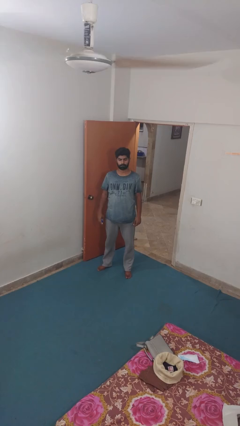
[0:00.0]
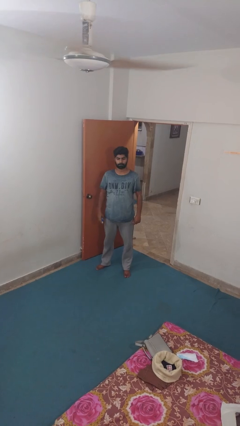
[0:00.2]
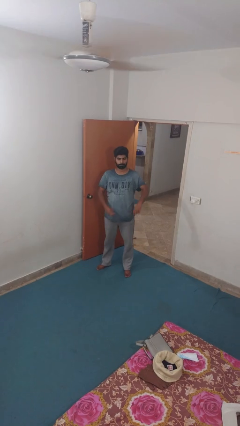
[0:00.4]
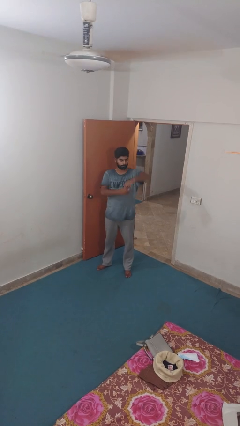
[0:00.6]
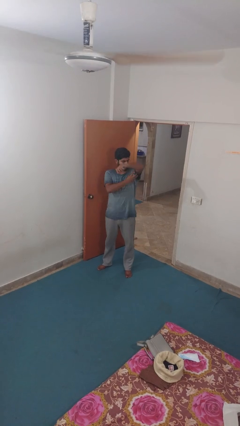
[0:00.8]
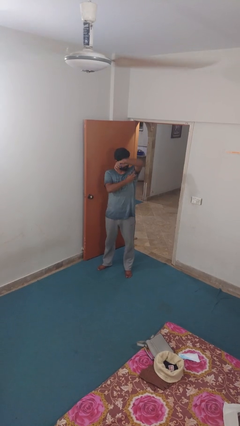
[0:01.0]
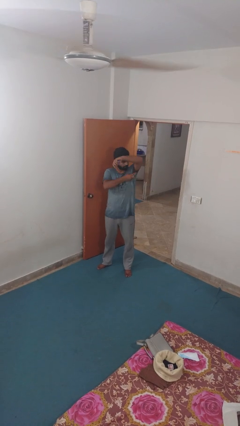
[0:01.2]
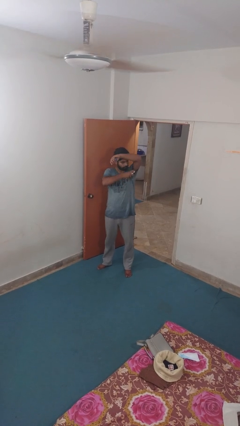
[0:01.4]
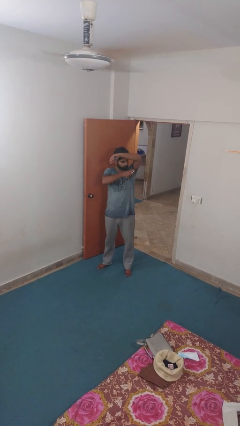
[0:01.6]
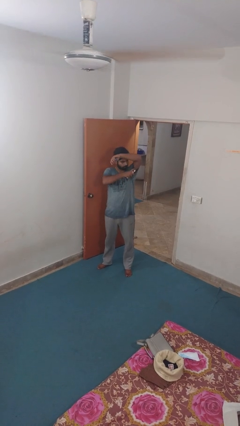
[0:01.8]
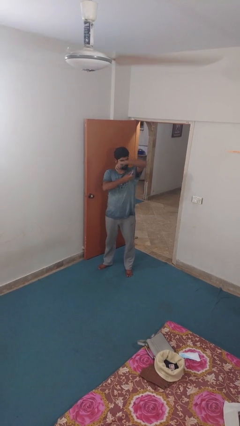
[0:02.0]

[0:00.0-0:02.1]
person applies deodorant

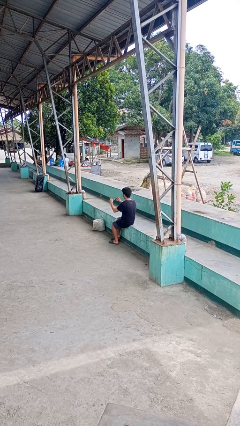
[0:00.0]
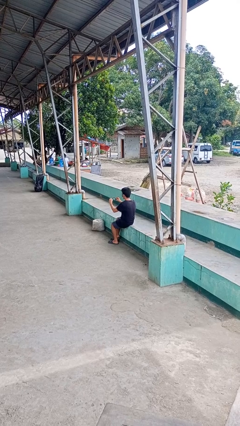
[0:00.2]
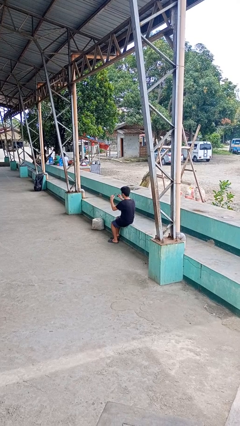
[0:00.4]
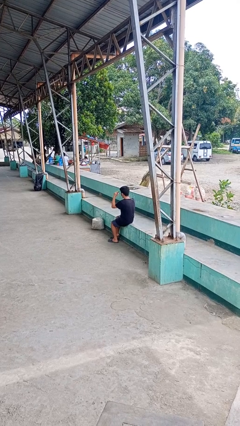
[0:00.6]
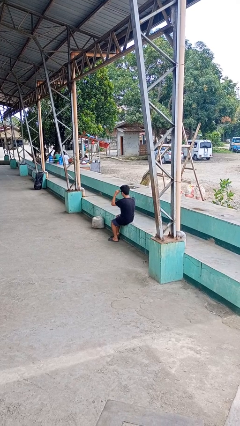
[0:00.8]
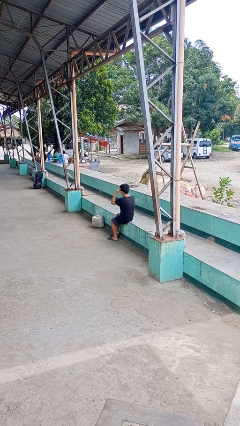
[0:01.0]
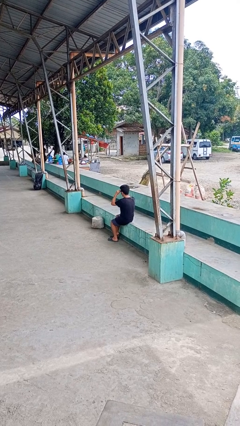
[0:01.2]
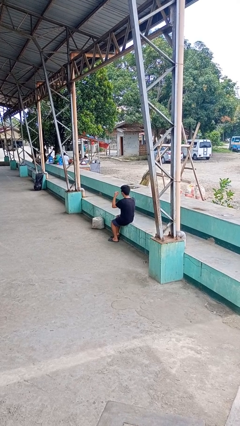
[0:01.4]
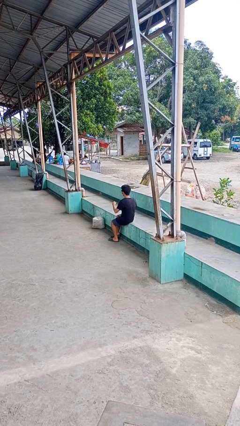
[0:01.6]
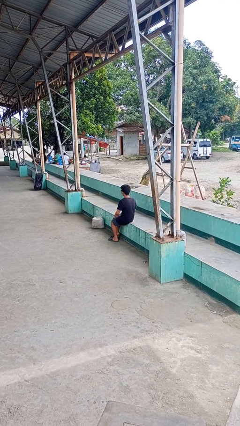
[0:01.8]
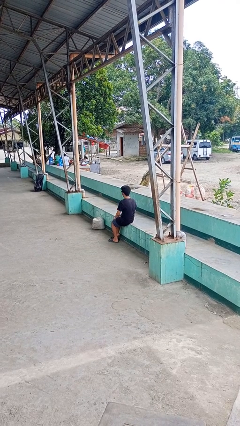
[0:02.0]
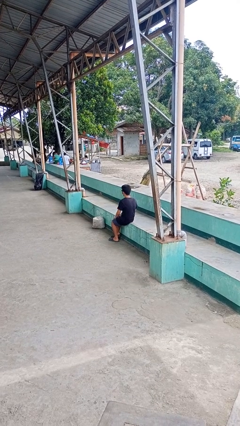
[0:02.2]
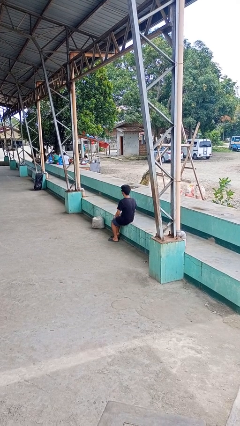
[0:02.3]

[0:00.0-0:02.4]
person puts on sunglasses

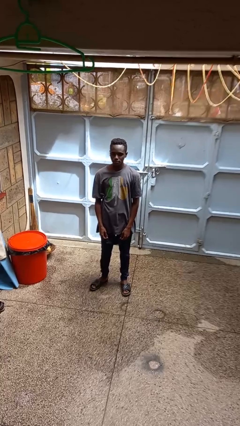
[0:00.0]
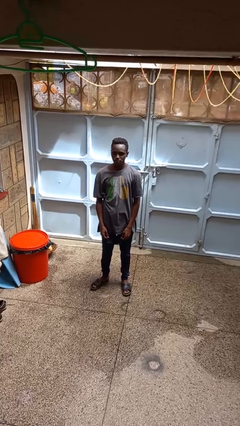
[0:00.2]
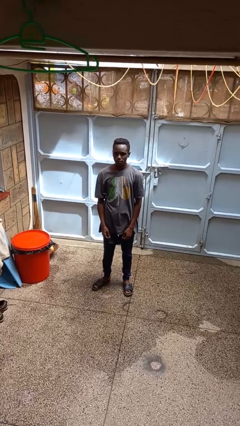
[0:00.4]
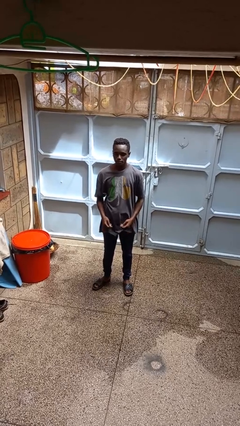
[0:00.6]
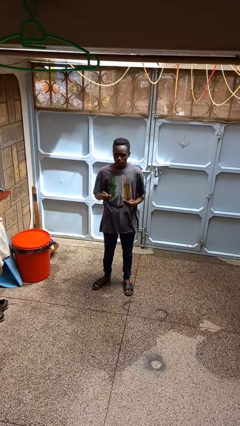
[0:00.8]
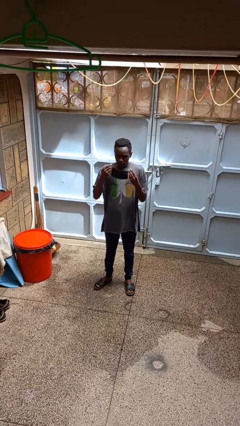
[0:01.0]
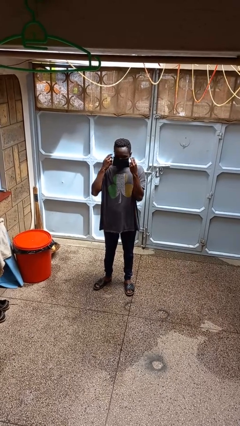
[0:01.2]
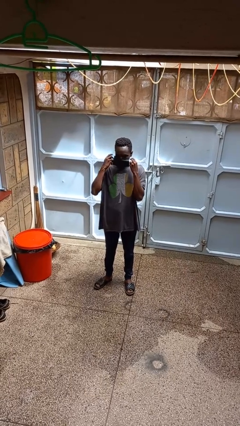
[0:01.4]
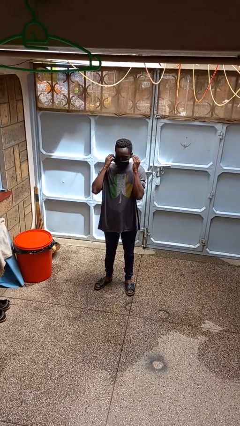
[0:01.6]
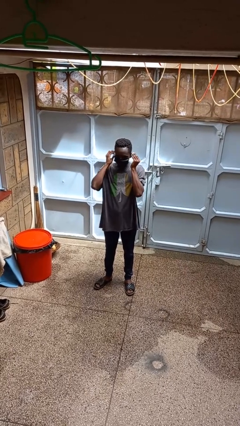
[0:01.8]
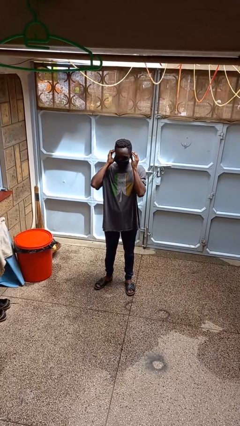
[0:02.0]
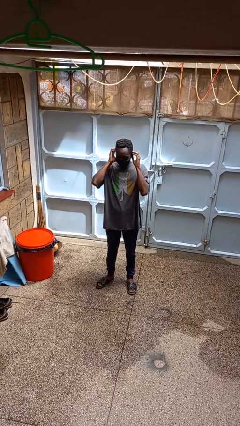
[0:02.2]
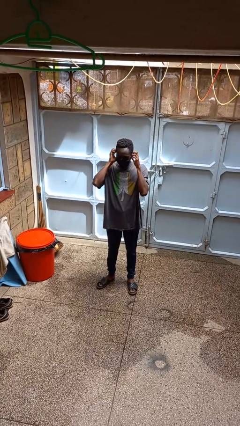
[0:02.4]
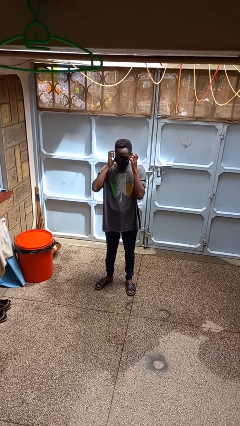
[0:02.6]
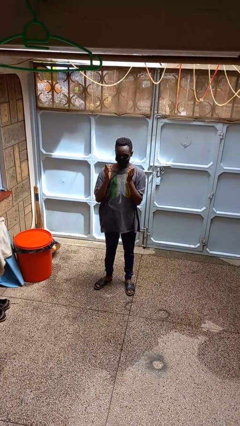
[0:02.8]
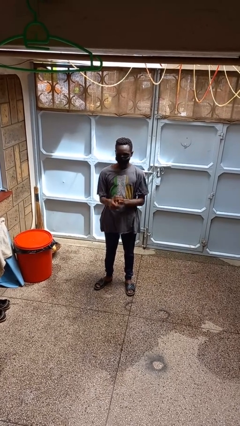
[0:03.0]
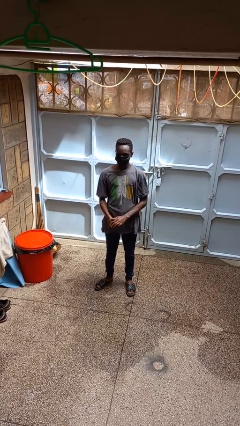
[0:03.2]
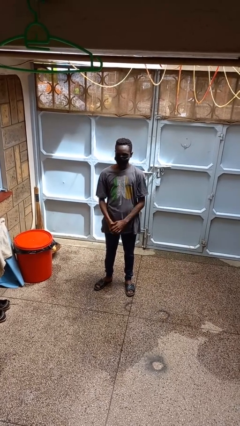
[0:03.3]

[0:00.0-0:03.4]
person puts on facemask

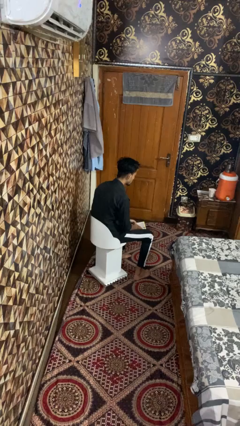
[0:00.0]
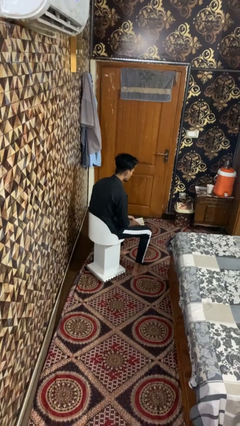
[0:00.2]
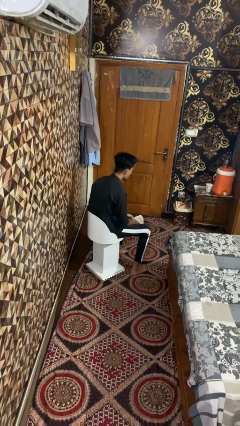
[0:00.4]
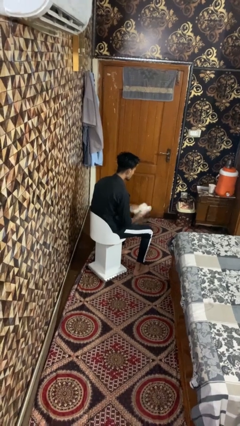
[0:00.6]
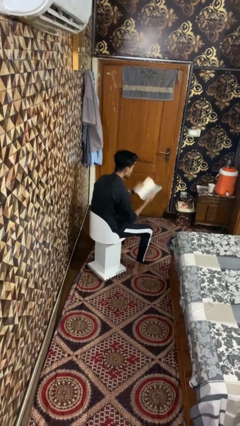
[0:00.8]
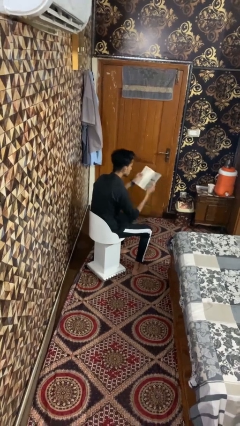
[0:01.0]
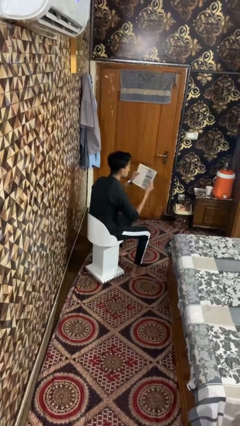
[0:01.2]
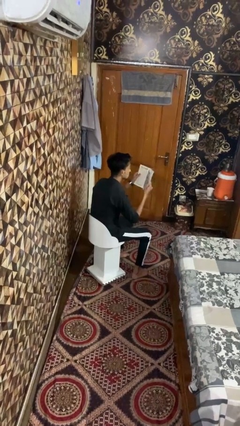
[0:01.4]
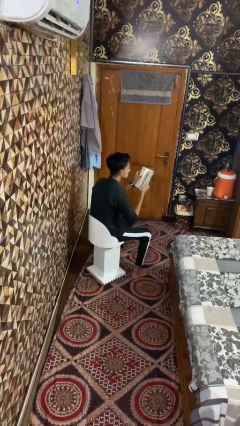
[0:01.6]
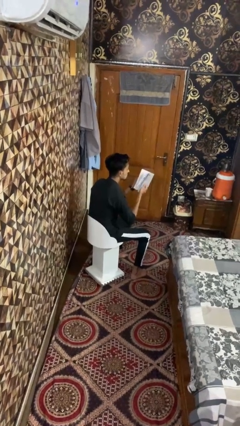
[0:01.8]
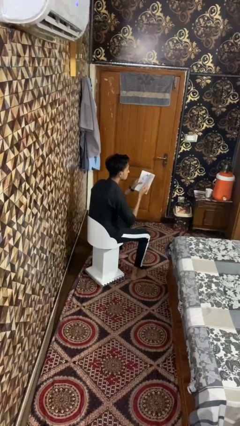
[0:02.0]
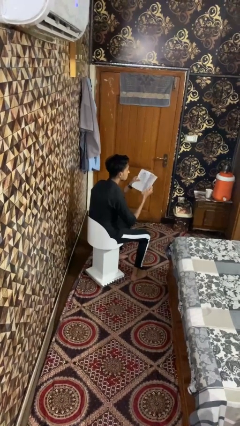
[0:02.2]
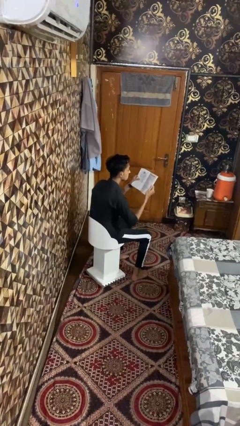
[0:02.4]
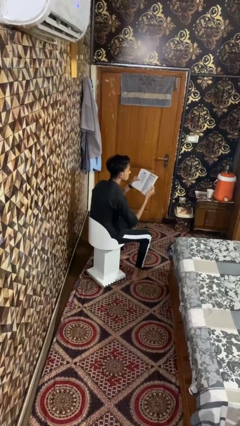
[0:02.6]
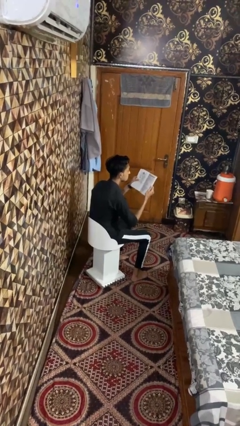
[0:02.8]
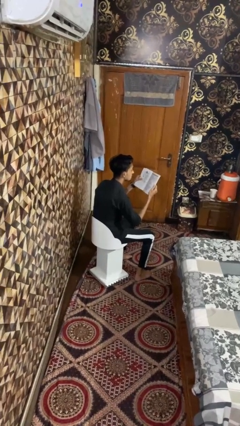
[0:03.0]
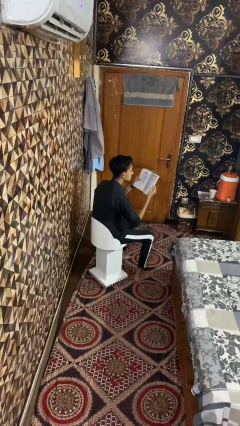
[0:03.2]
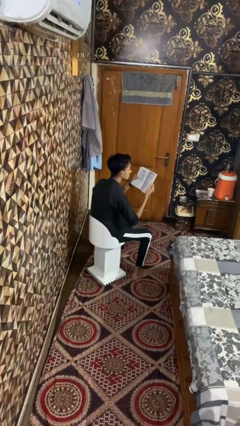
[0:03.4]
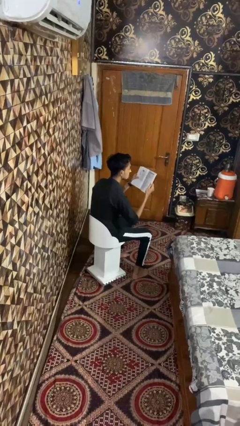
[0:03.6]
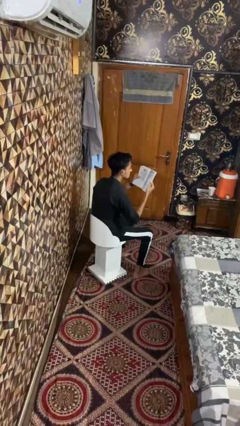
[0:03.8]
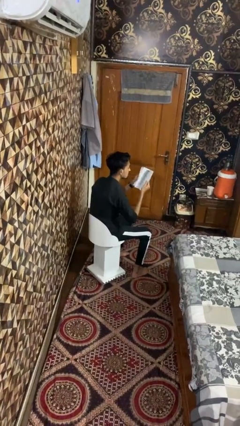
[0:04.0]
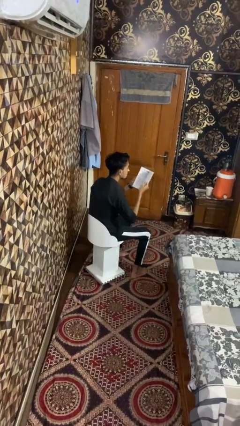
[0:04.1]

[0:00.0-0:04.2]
person reads book

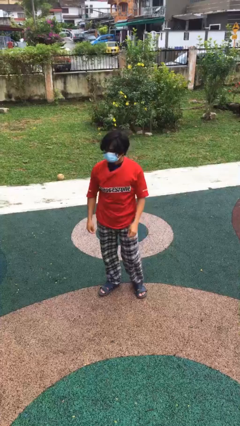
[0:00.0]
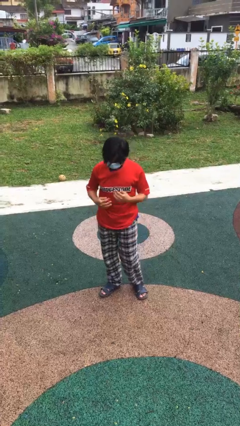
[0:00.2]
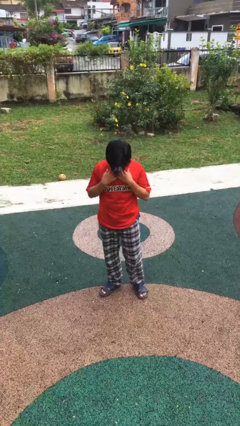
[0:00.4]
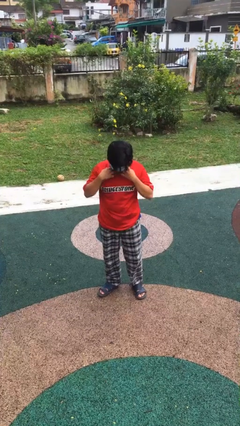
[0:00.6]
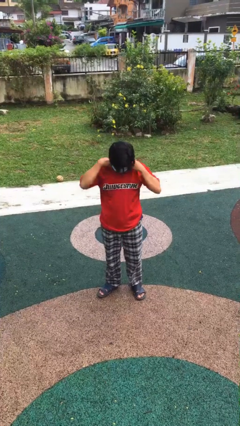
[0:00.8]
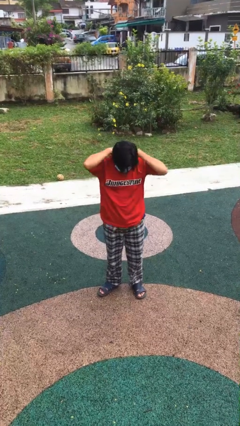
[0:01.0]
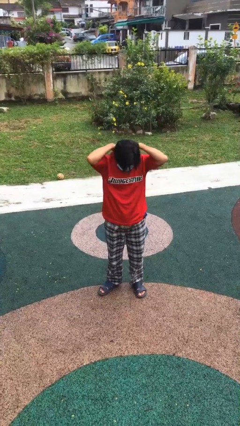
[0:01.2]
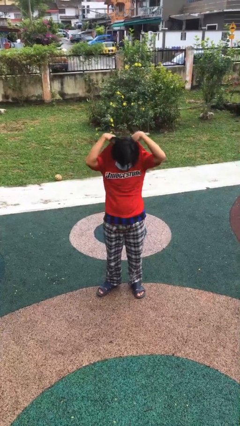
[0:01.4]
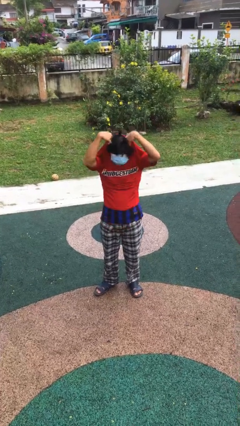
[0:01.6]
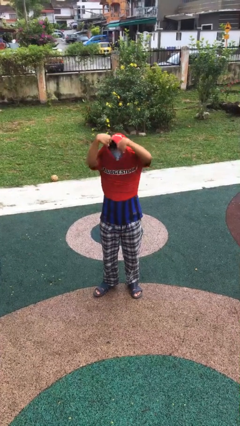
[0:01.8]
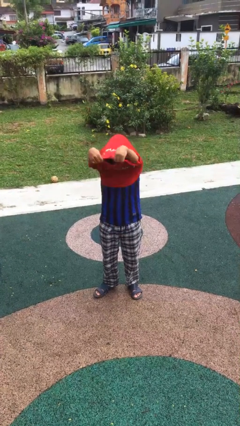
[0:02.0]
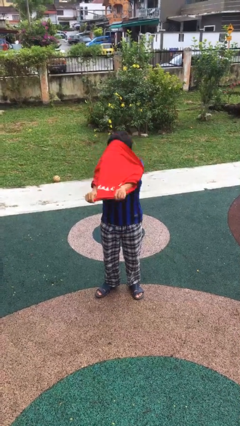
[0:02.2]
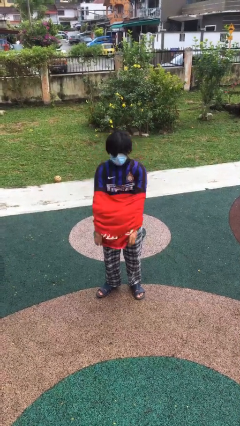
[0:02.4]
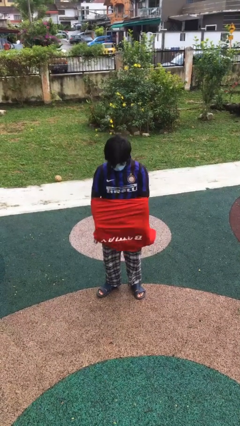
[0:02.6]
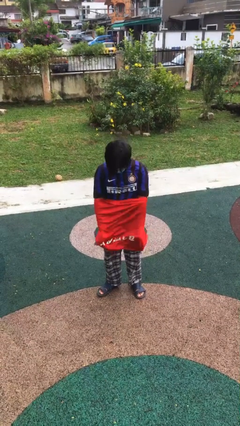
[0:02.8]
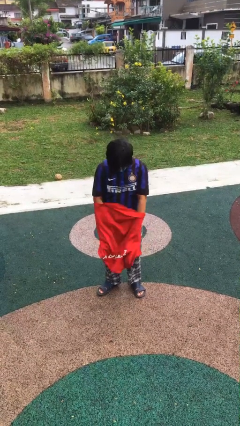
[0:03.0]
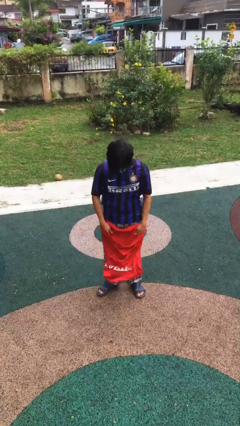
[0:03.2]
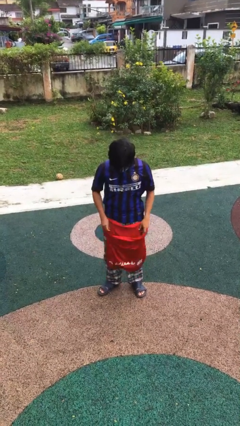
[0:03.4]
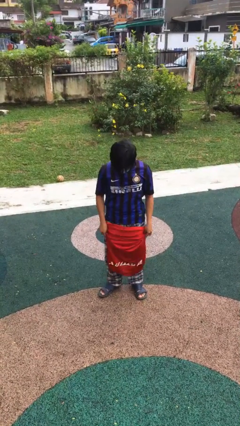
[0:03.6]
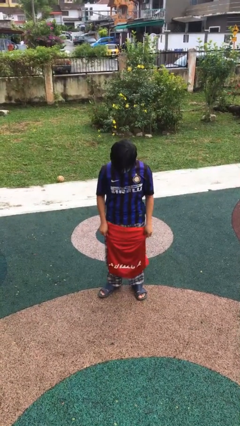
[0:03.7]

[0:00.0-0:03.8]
person takes off shirt

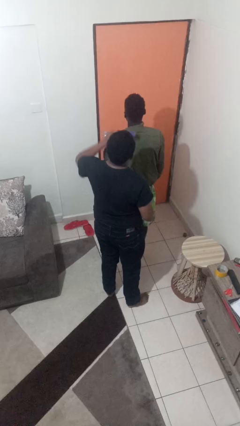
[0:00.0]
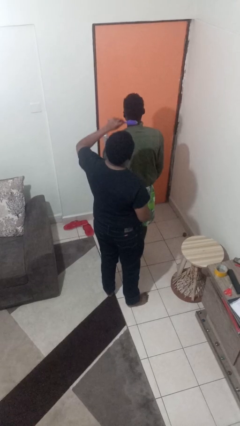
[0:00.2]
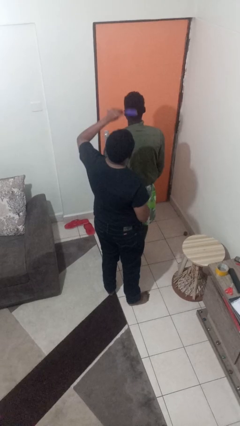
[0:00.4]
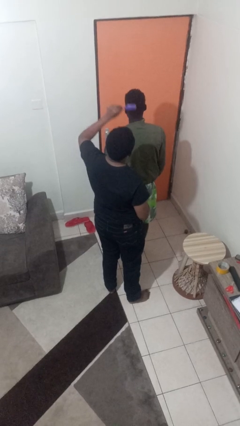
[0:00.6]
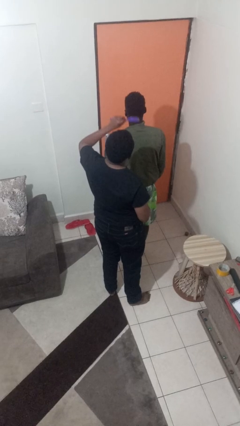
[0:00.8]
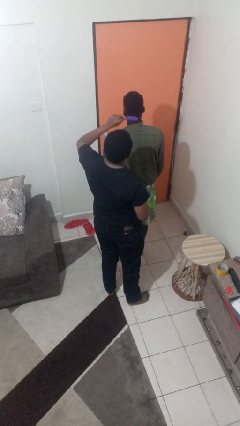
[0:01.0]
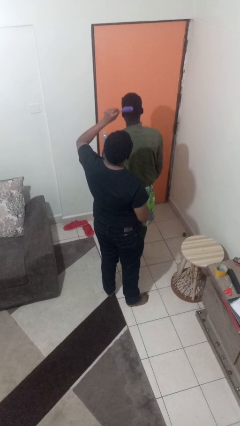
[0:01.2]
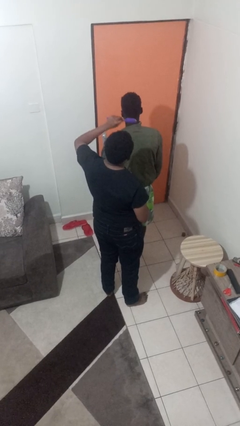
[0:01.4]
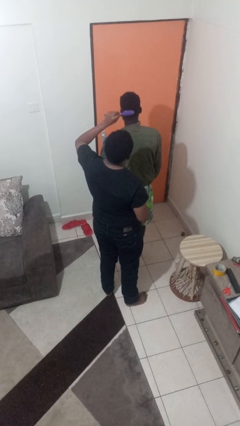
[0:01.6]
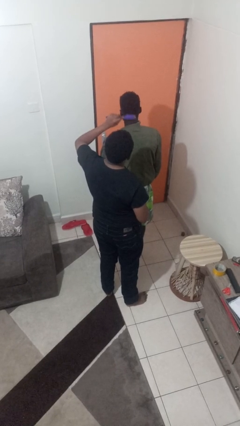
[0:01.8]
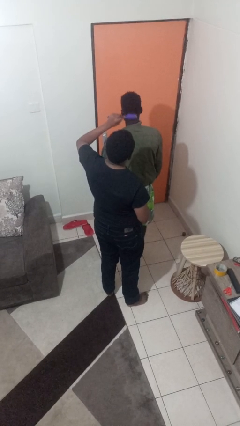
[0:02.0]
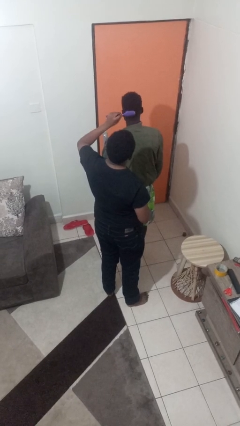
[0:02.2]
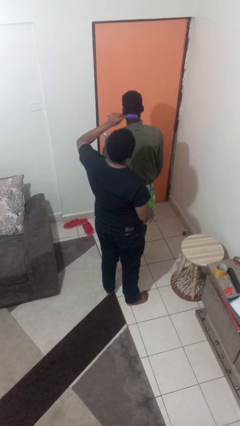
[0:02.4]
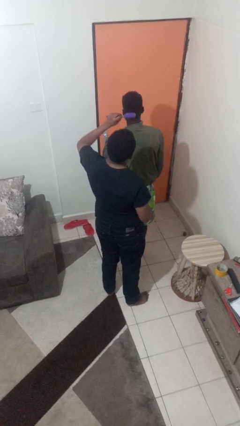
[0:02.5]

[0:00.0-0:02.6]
person brushes hair of person
